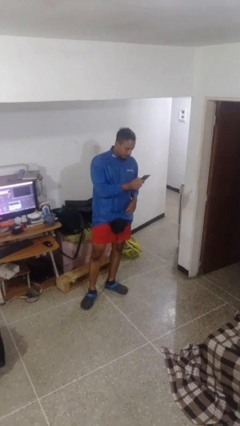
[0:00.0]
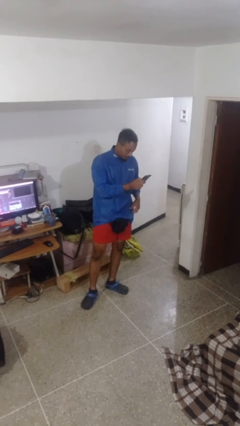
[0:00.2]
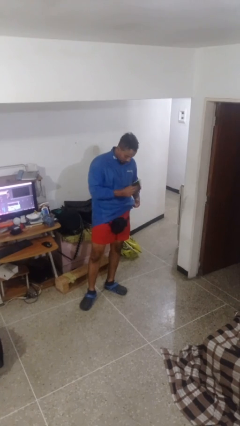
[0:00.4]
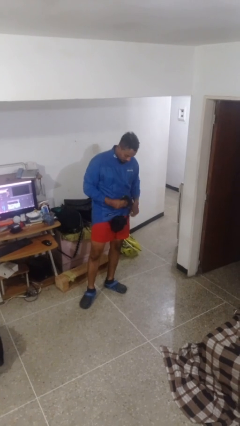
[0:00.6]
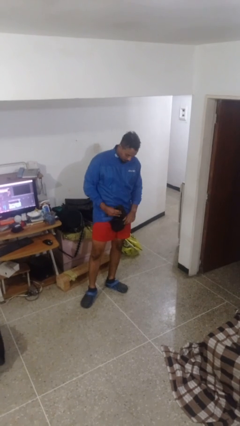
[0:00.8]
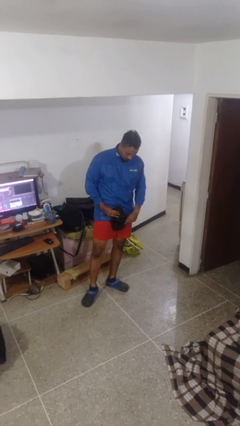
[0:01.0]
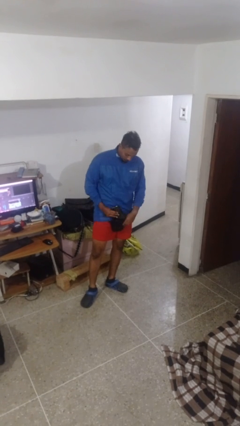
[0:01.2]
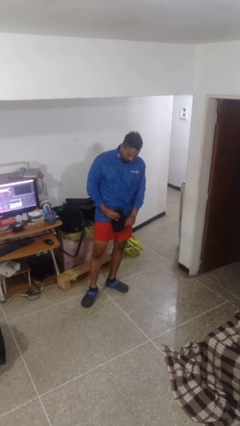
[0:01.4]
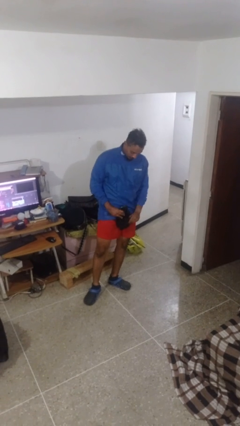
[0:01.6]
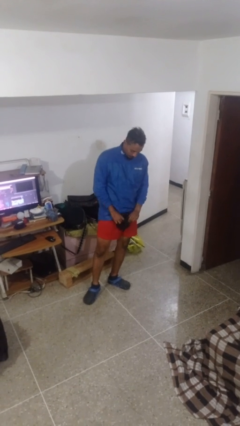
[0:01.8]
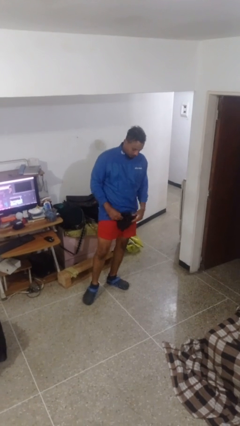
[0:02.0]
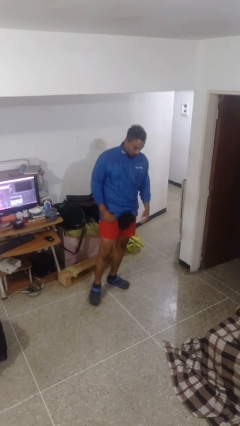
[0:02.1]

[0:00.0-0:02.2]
person puts phone into pocket

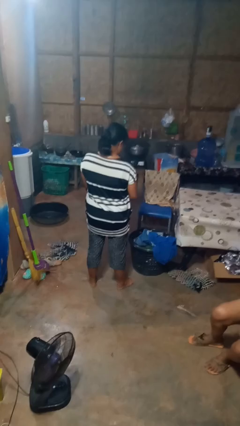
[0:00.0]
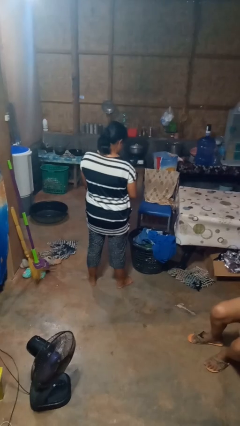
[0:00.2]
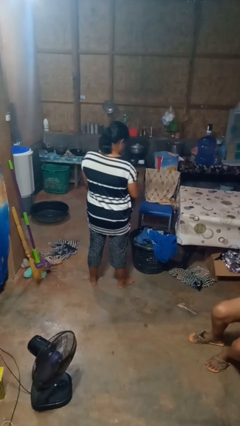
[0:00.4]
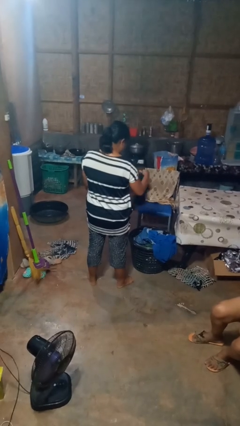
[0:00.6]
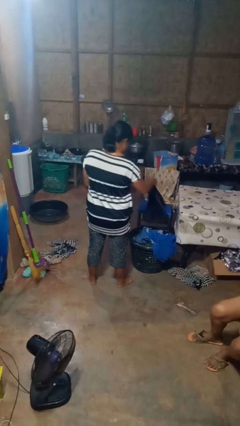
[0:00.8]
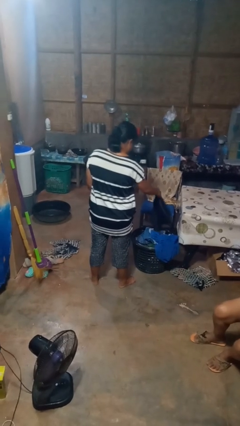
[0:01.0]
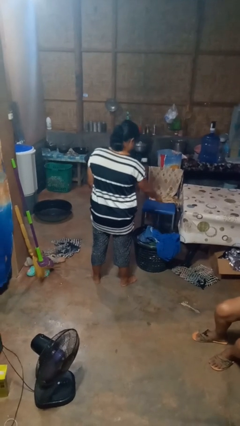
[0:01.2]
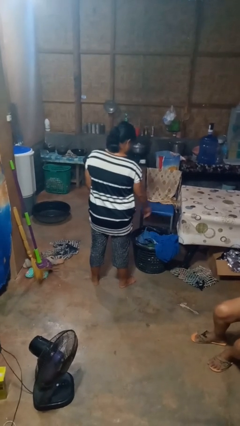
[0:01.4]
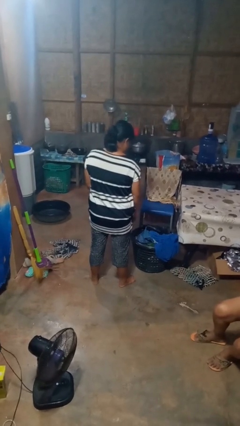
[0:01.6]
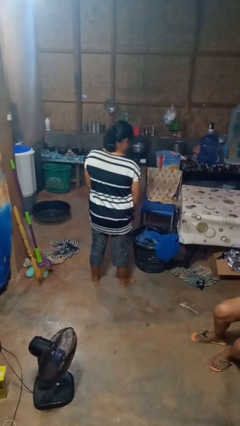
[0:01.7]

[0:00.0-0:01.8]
person puts object into basket

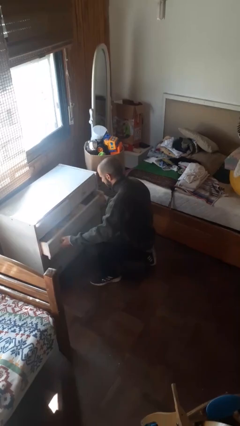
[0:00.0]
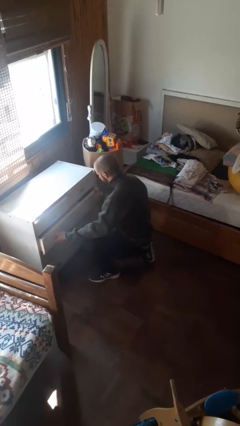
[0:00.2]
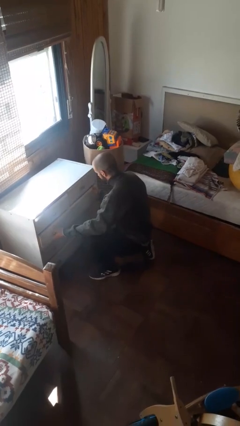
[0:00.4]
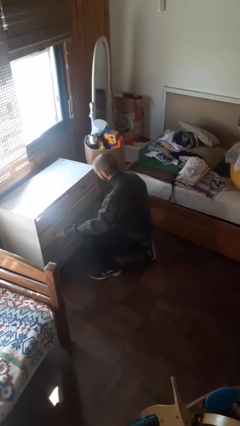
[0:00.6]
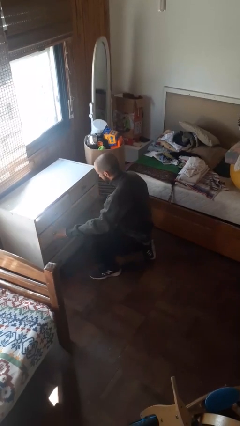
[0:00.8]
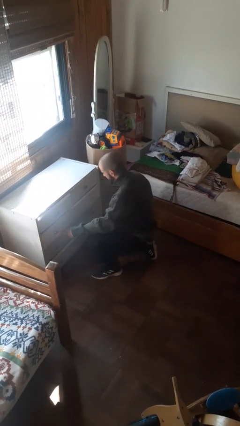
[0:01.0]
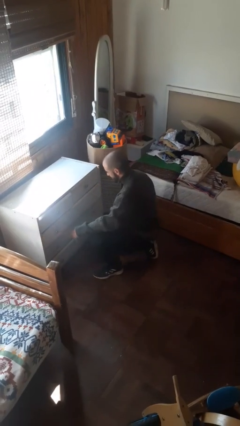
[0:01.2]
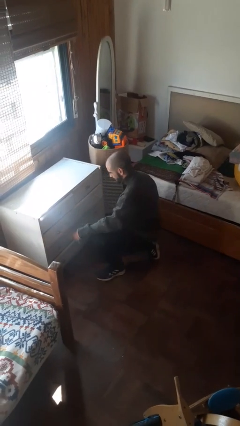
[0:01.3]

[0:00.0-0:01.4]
person closes dresser drawer

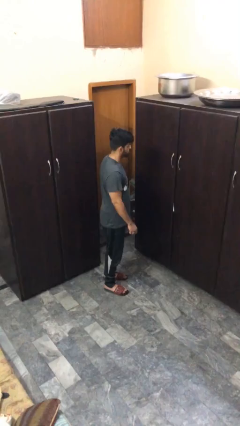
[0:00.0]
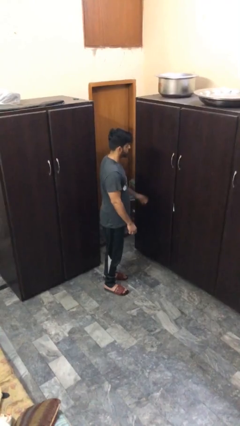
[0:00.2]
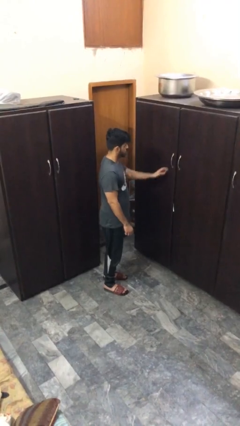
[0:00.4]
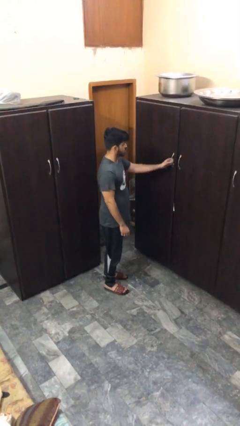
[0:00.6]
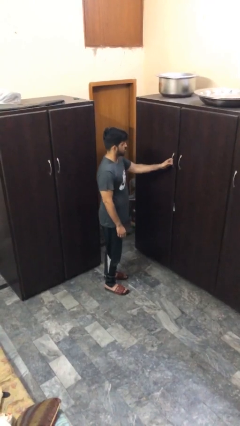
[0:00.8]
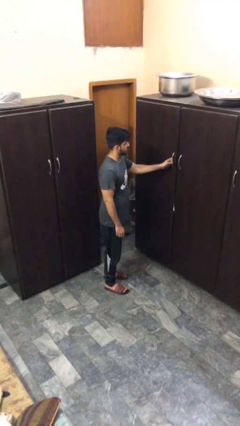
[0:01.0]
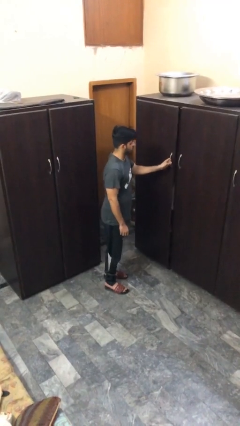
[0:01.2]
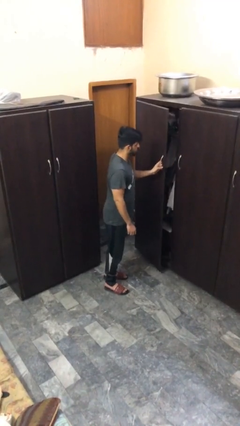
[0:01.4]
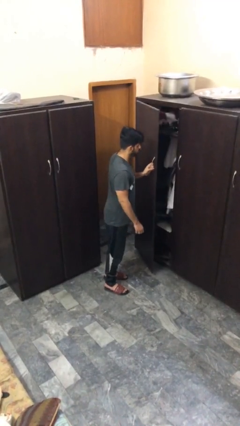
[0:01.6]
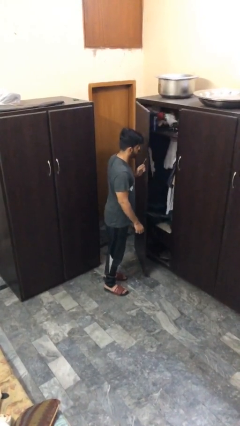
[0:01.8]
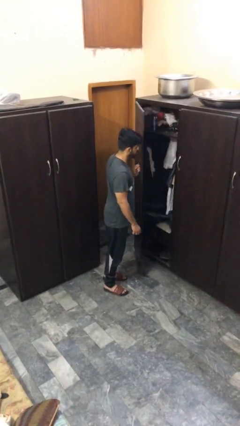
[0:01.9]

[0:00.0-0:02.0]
person opens dresser drawer

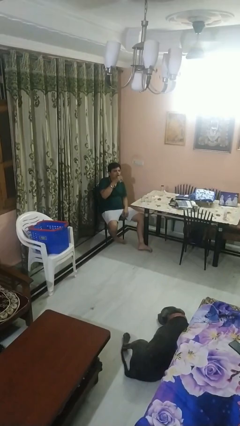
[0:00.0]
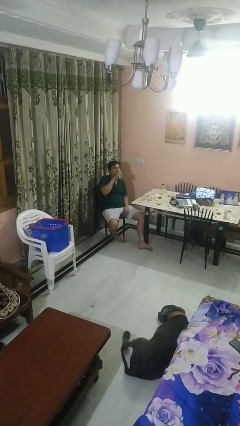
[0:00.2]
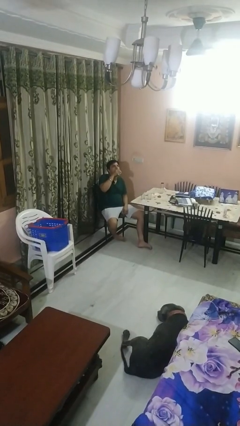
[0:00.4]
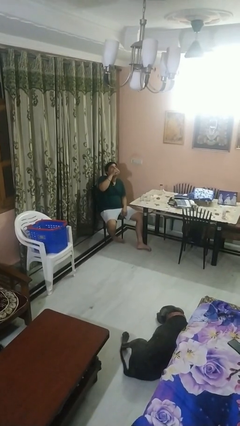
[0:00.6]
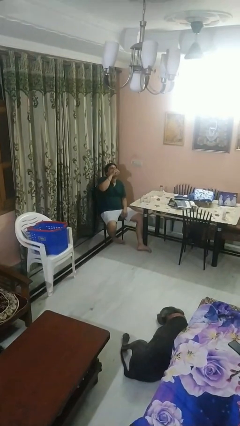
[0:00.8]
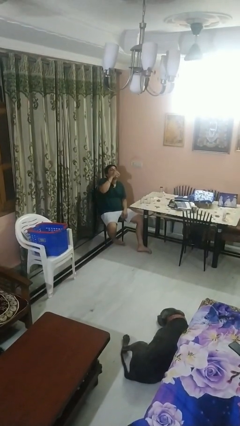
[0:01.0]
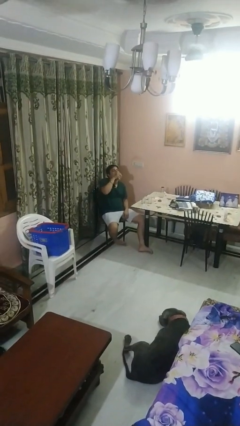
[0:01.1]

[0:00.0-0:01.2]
person drinks from shotglass

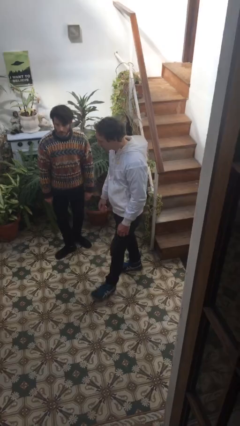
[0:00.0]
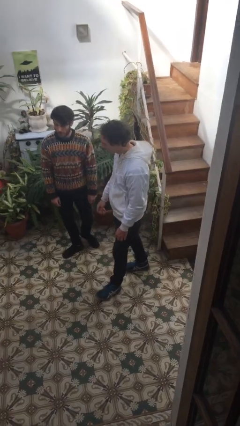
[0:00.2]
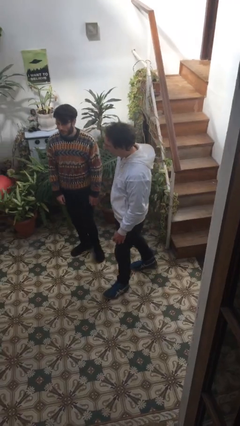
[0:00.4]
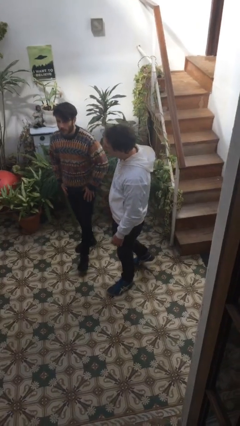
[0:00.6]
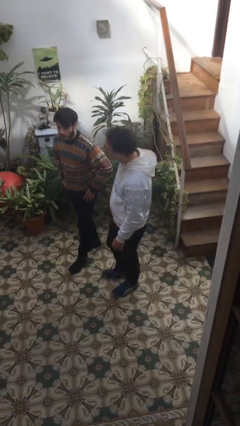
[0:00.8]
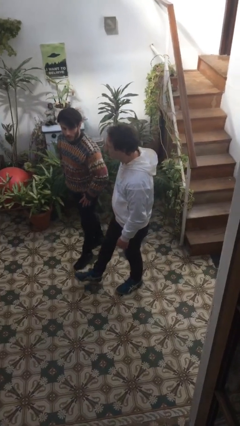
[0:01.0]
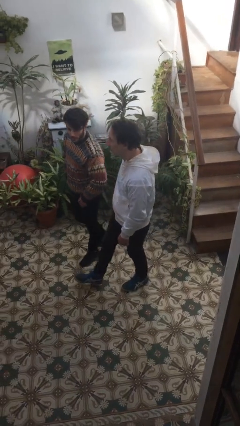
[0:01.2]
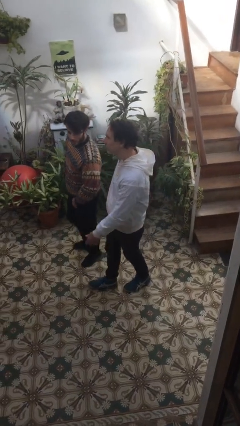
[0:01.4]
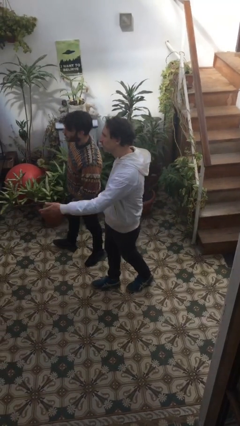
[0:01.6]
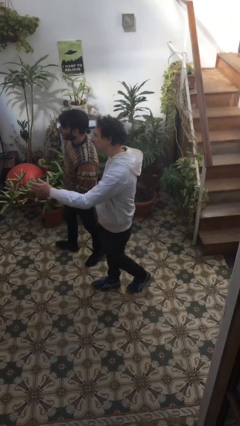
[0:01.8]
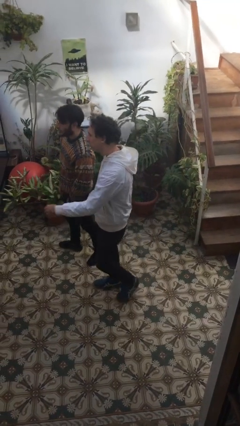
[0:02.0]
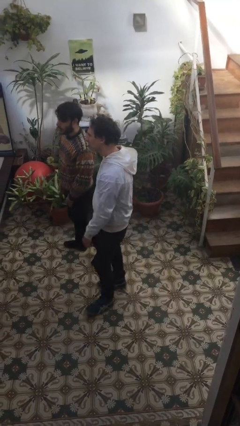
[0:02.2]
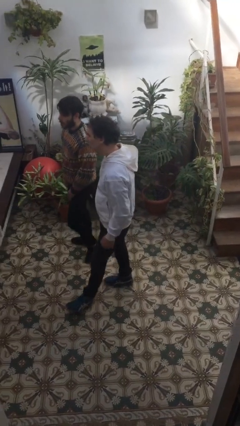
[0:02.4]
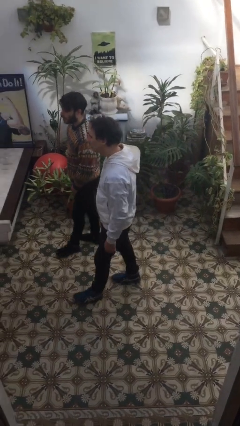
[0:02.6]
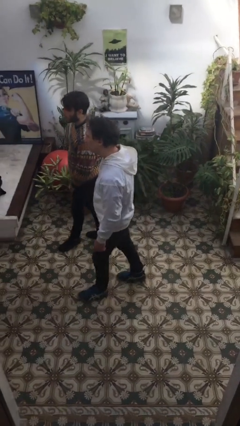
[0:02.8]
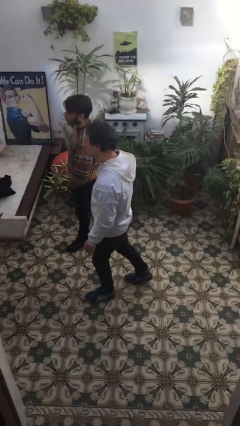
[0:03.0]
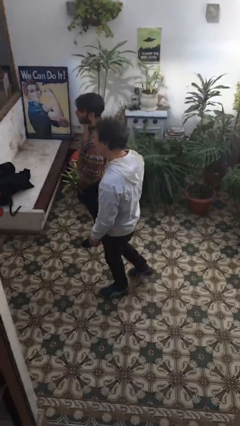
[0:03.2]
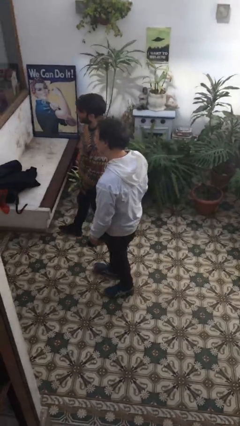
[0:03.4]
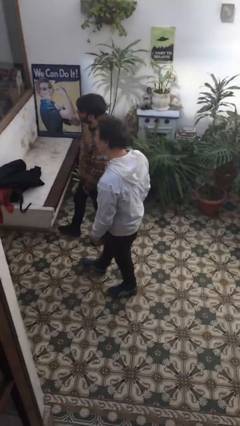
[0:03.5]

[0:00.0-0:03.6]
person talks to person

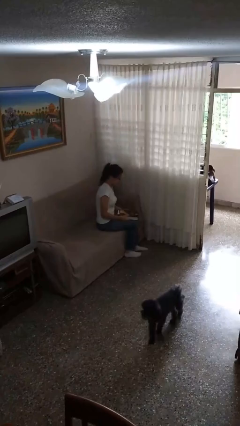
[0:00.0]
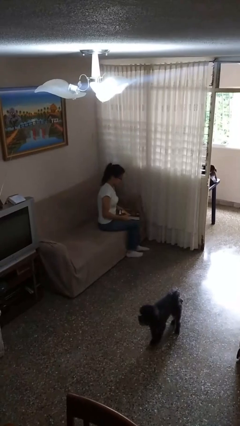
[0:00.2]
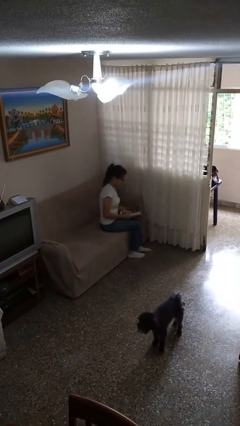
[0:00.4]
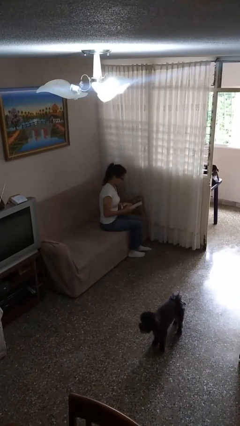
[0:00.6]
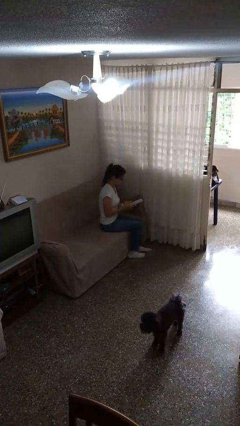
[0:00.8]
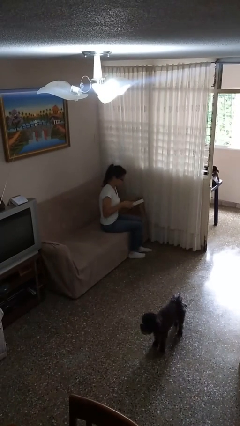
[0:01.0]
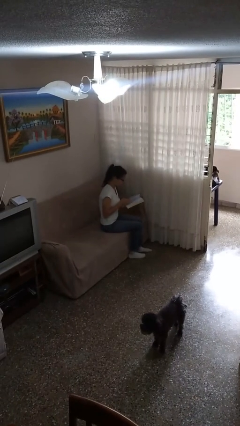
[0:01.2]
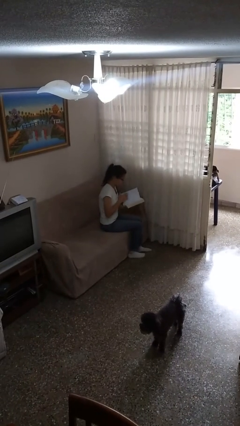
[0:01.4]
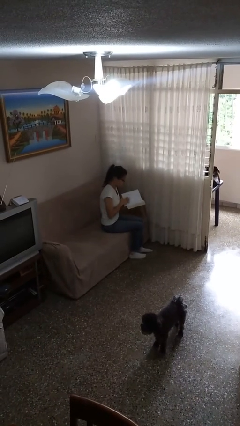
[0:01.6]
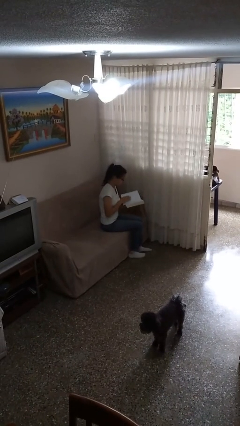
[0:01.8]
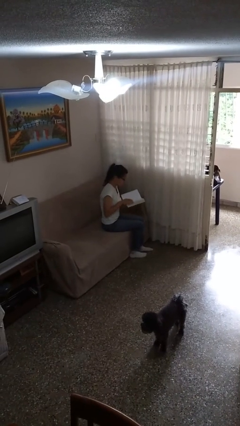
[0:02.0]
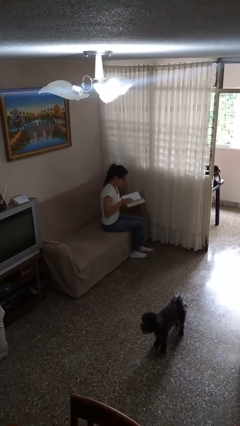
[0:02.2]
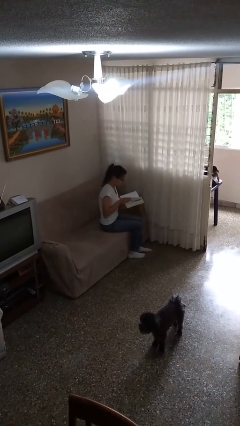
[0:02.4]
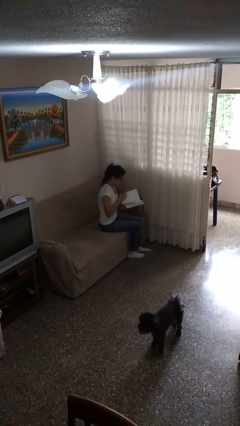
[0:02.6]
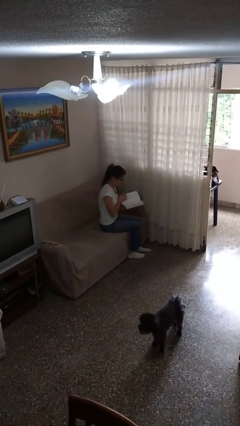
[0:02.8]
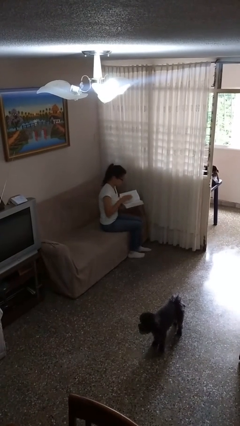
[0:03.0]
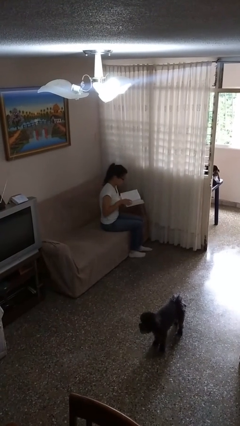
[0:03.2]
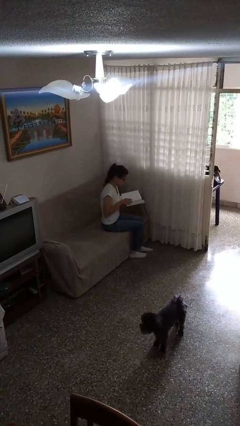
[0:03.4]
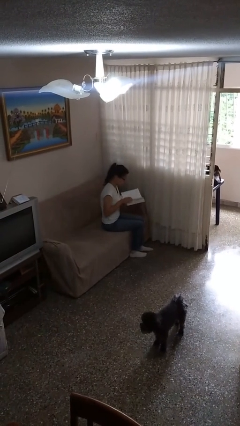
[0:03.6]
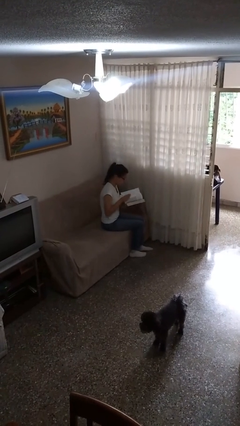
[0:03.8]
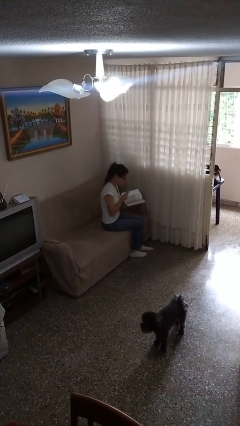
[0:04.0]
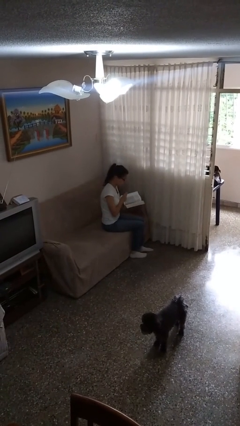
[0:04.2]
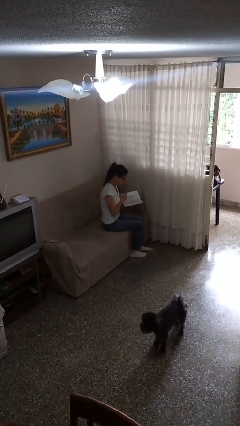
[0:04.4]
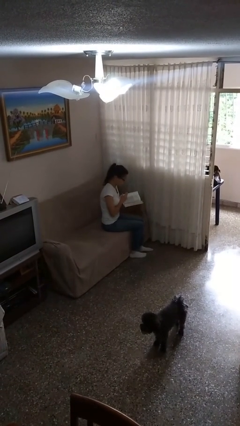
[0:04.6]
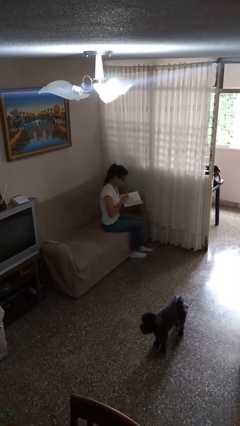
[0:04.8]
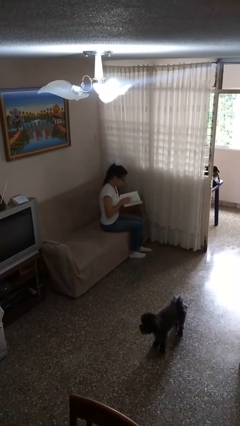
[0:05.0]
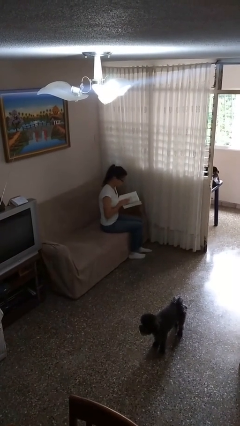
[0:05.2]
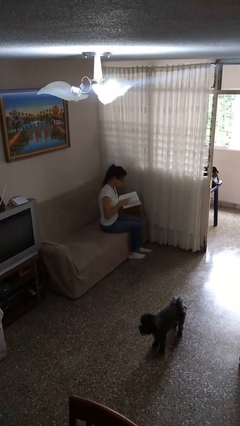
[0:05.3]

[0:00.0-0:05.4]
person reads book
